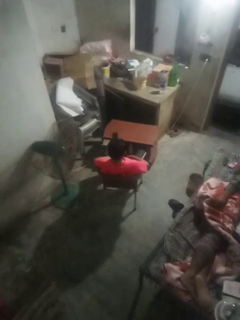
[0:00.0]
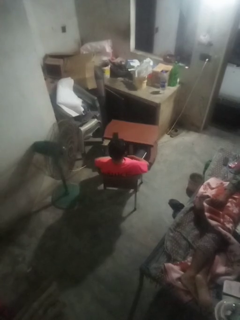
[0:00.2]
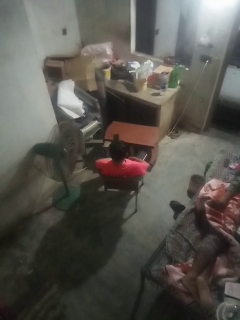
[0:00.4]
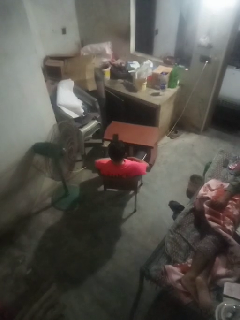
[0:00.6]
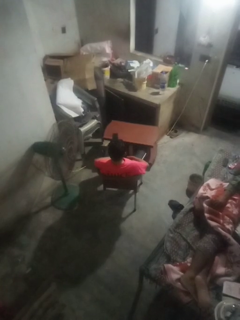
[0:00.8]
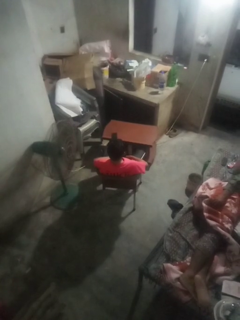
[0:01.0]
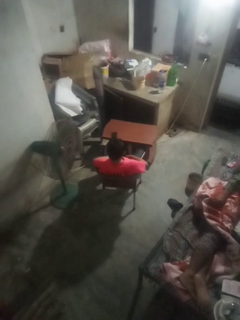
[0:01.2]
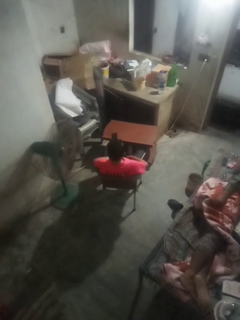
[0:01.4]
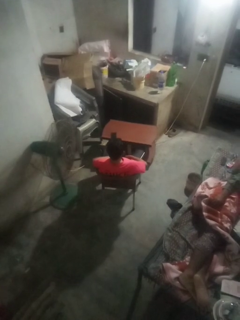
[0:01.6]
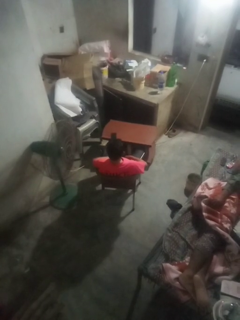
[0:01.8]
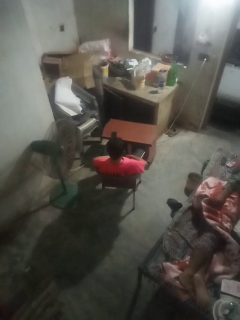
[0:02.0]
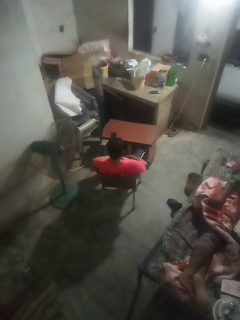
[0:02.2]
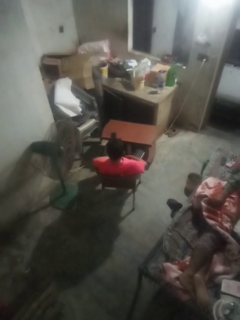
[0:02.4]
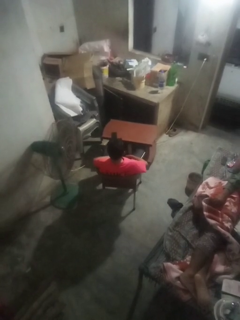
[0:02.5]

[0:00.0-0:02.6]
person nods head

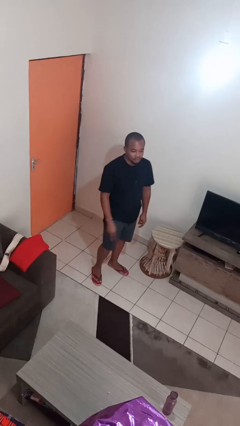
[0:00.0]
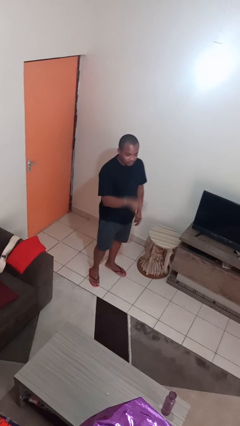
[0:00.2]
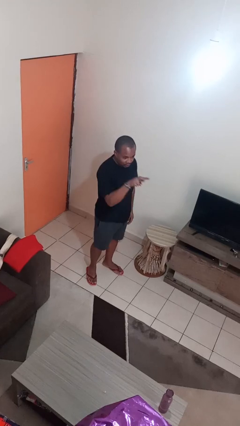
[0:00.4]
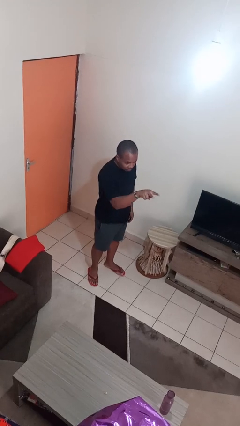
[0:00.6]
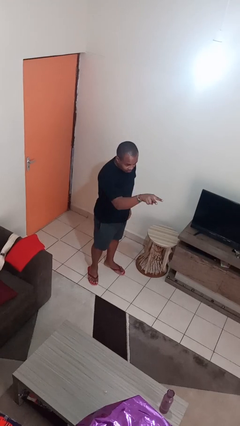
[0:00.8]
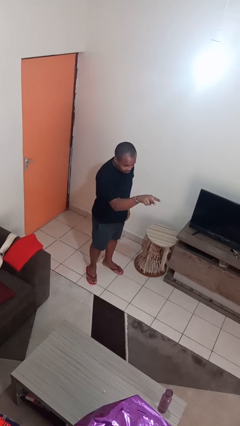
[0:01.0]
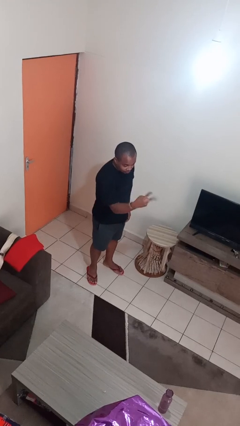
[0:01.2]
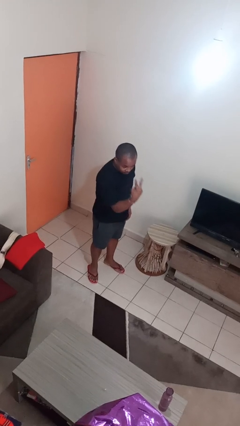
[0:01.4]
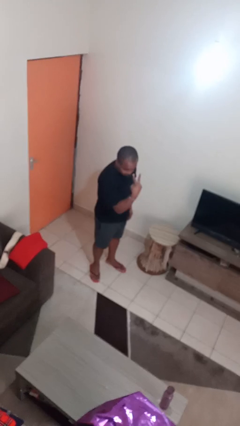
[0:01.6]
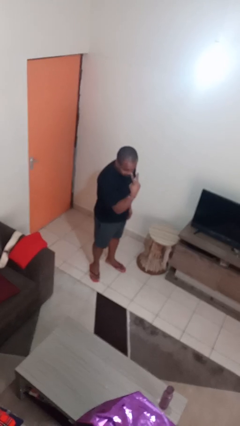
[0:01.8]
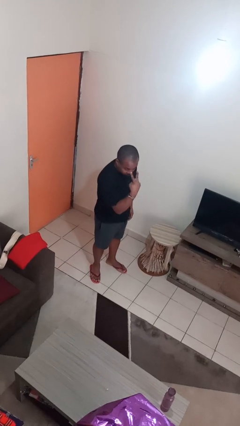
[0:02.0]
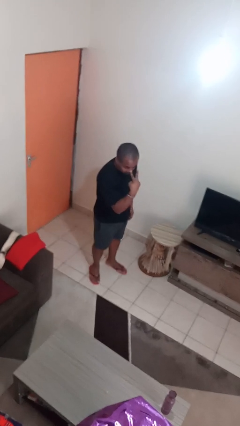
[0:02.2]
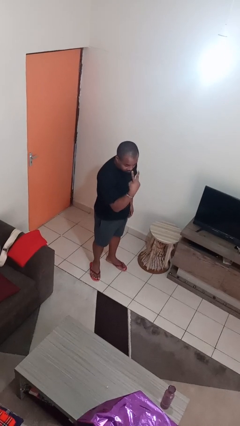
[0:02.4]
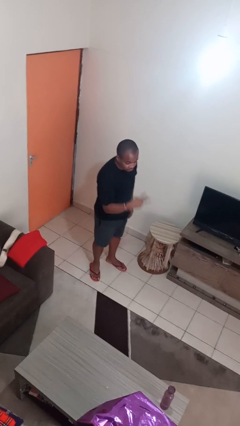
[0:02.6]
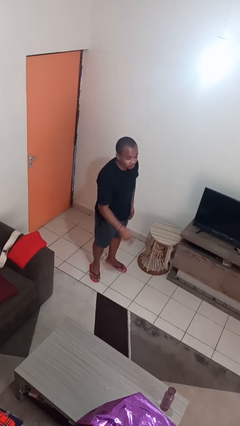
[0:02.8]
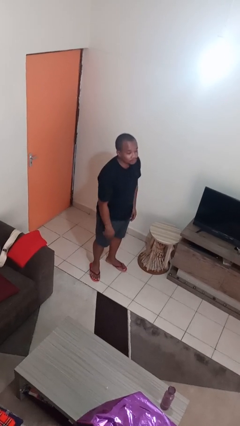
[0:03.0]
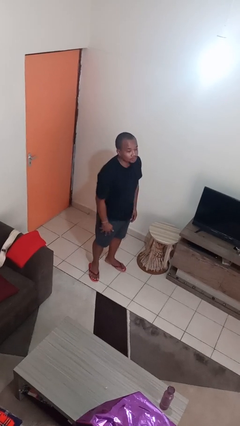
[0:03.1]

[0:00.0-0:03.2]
person gestures watch closely

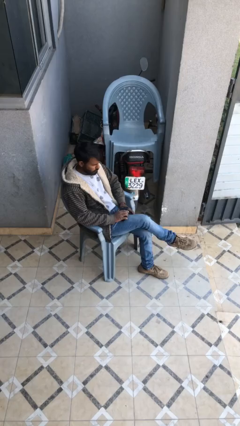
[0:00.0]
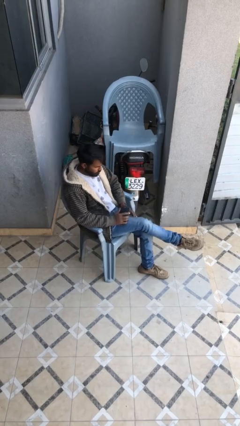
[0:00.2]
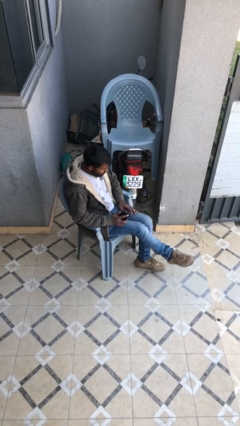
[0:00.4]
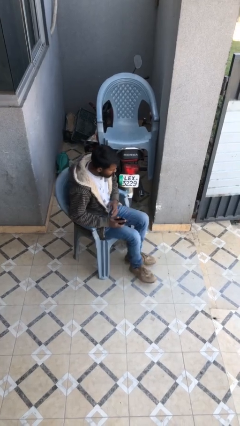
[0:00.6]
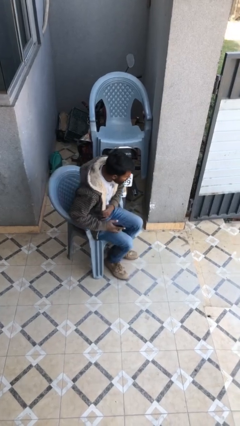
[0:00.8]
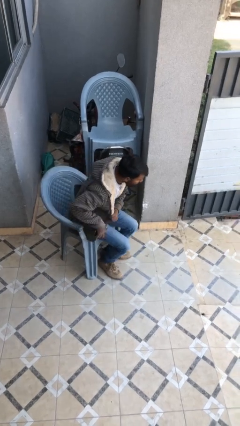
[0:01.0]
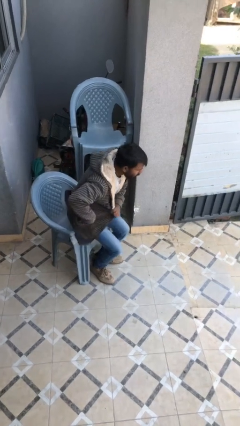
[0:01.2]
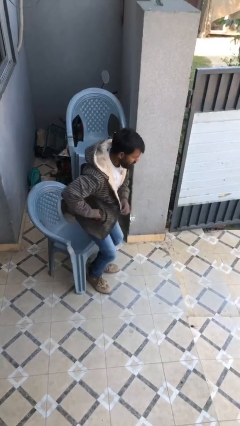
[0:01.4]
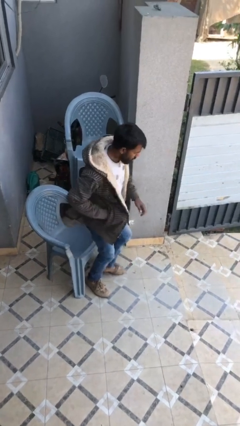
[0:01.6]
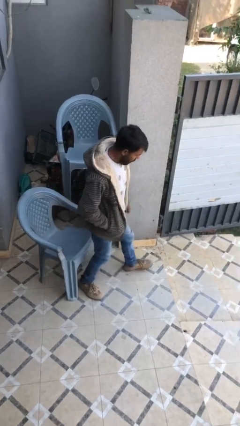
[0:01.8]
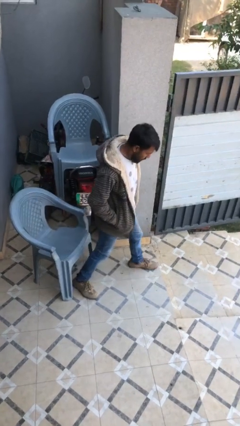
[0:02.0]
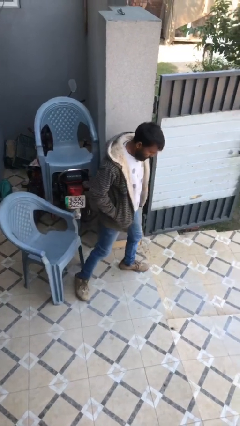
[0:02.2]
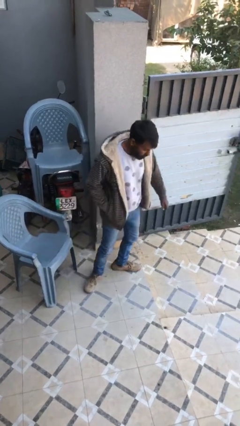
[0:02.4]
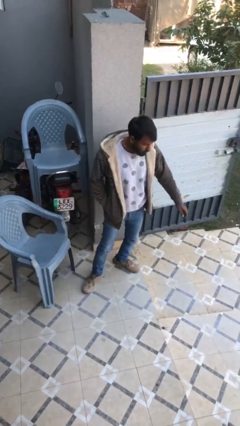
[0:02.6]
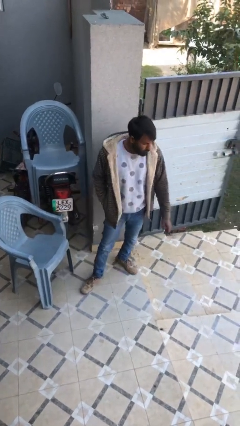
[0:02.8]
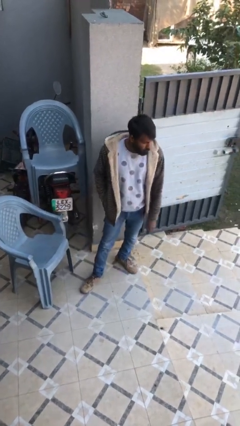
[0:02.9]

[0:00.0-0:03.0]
person stands up

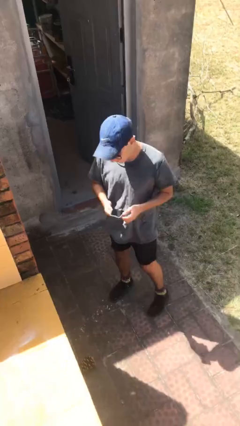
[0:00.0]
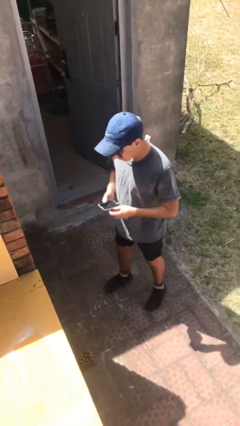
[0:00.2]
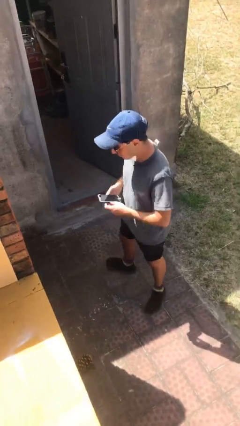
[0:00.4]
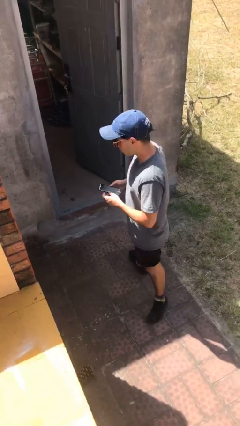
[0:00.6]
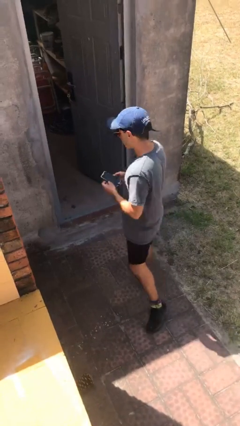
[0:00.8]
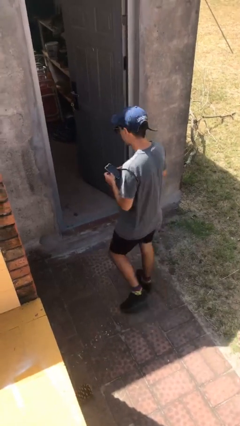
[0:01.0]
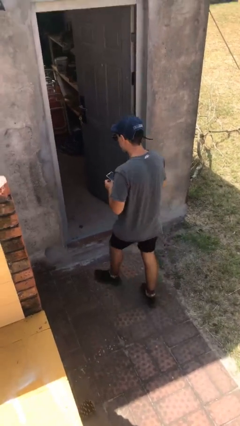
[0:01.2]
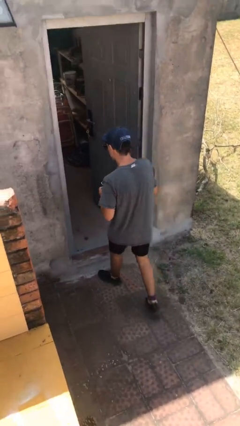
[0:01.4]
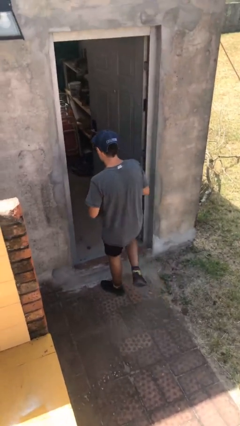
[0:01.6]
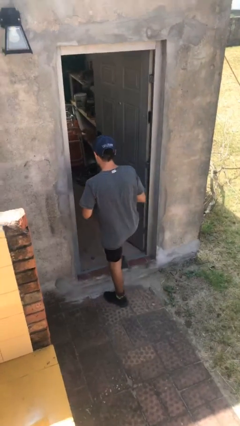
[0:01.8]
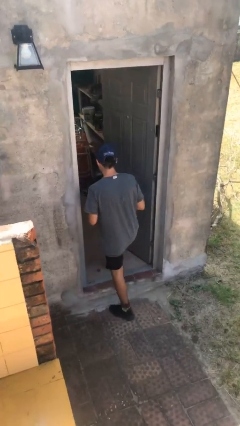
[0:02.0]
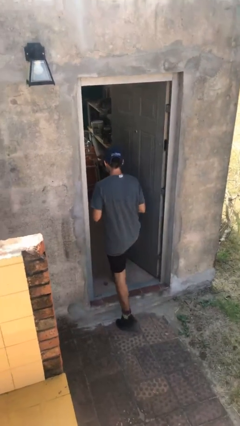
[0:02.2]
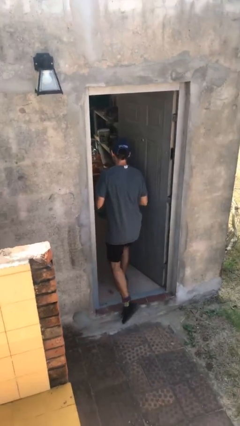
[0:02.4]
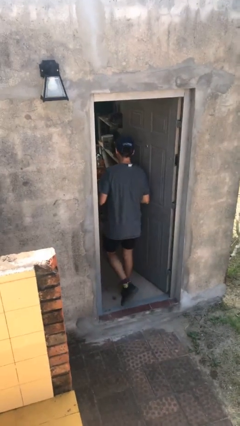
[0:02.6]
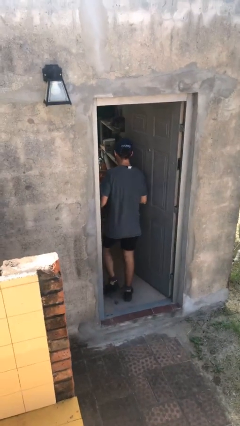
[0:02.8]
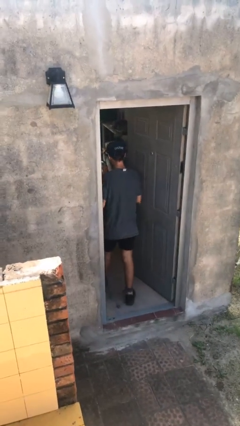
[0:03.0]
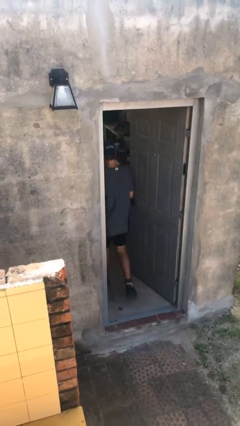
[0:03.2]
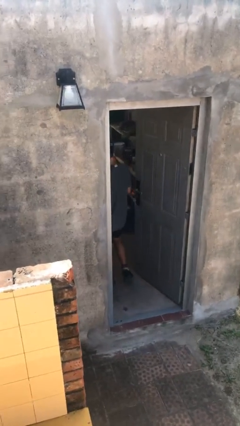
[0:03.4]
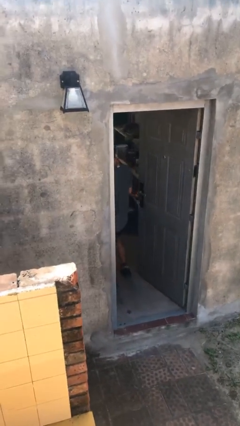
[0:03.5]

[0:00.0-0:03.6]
person exits scene through structure

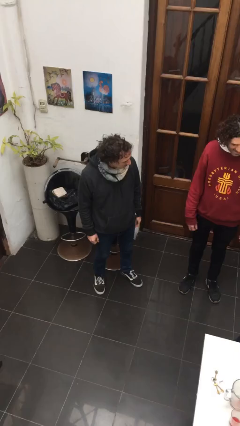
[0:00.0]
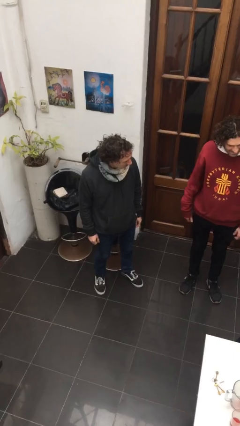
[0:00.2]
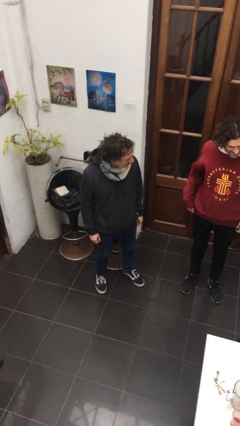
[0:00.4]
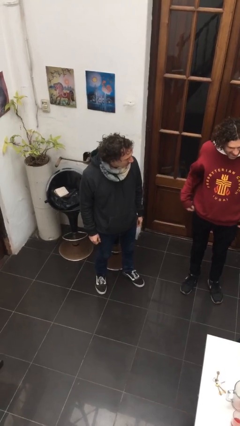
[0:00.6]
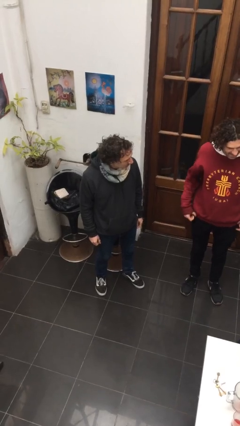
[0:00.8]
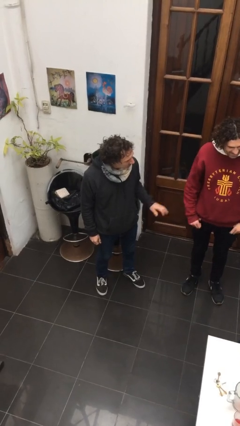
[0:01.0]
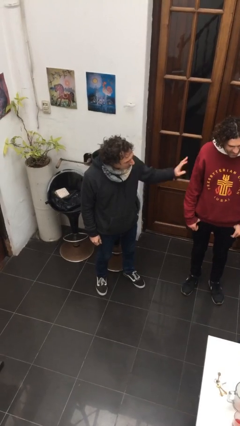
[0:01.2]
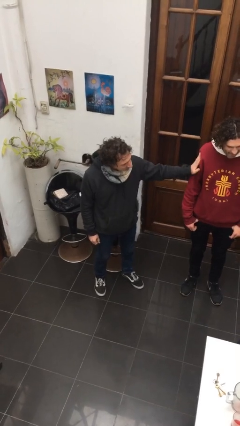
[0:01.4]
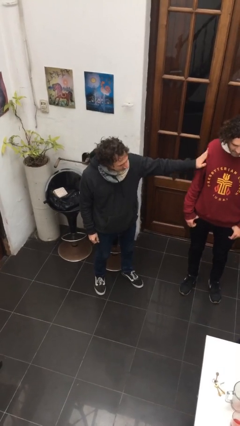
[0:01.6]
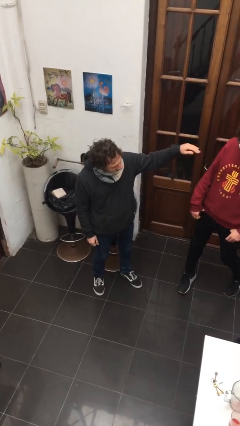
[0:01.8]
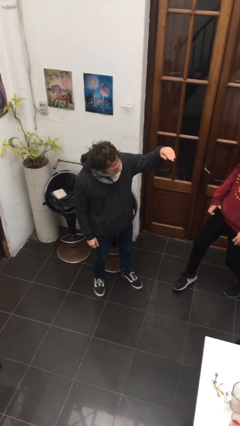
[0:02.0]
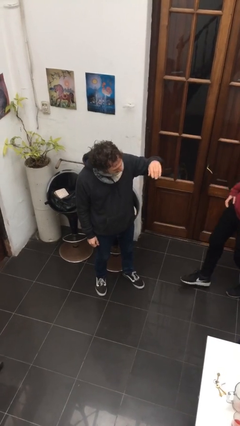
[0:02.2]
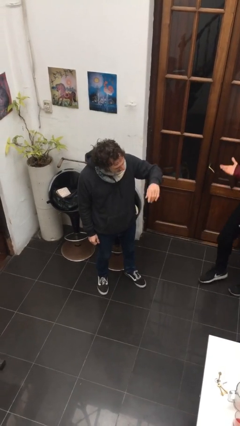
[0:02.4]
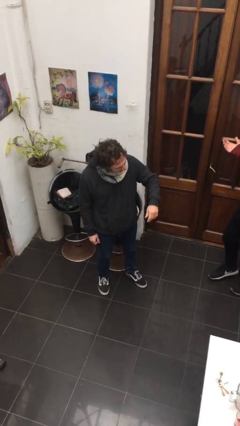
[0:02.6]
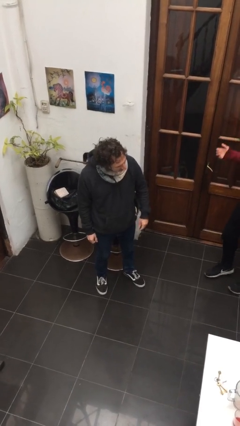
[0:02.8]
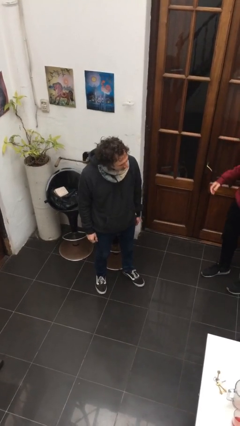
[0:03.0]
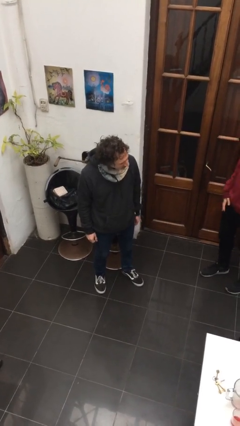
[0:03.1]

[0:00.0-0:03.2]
person shoves person

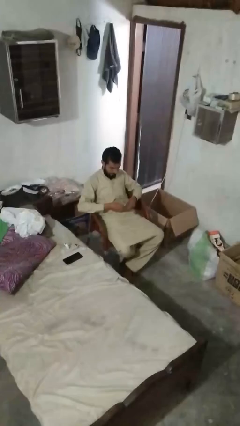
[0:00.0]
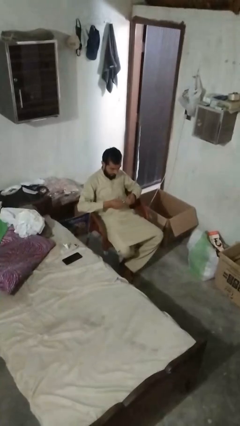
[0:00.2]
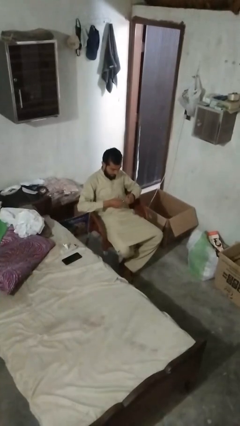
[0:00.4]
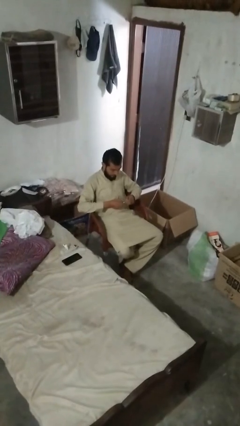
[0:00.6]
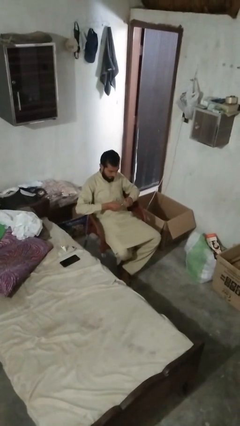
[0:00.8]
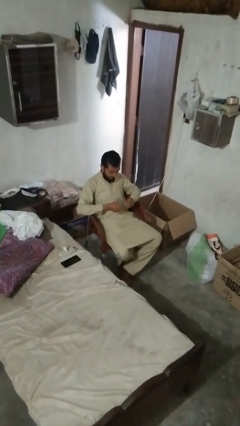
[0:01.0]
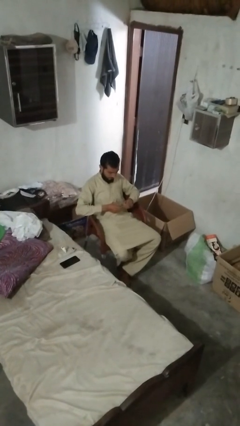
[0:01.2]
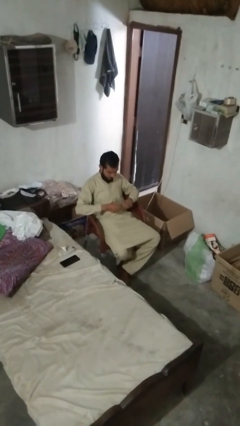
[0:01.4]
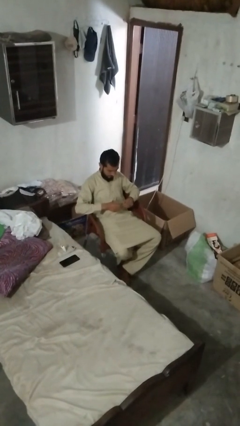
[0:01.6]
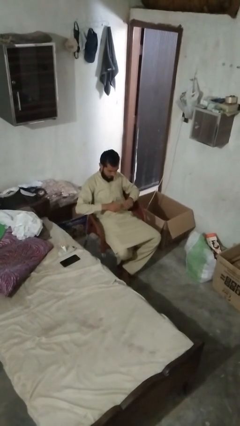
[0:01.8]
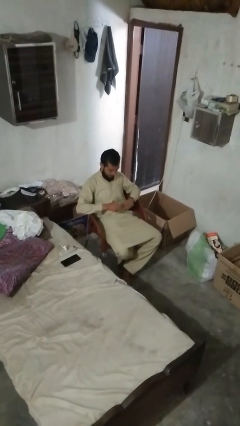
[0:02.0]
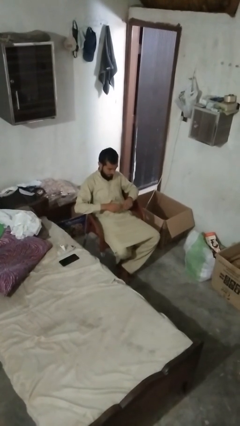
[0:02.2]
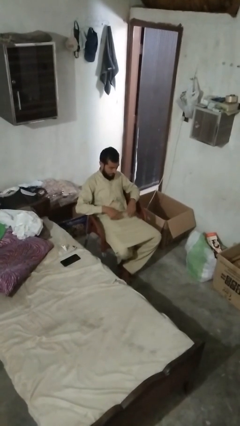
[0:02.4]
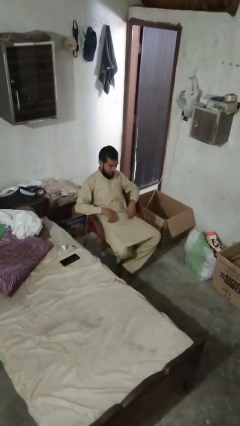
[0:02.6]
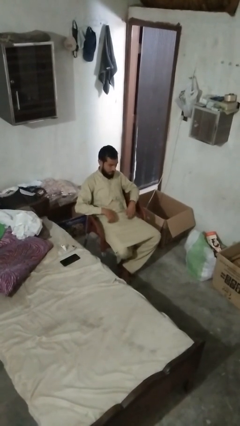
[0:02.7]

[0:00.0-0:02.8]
person clips fingernails
